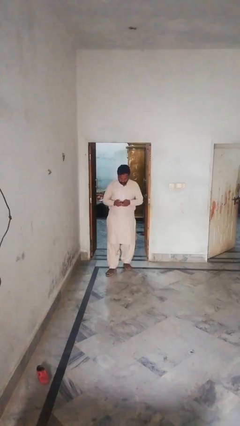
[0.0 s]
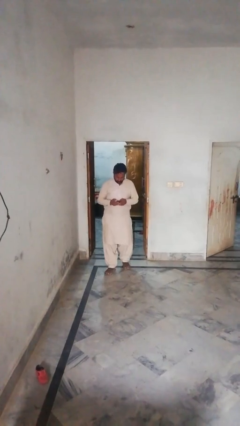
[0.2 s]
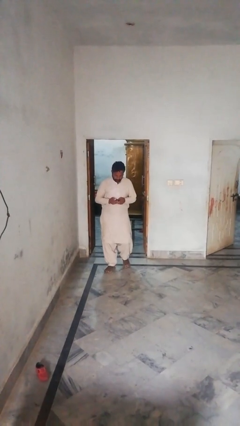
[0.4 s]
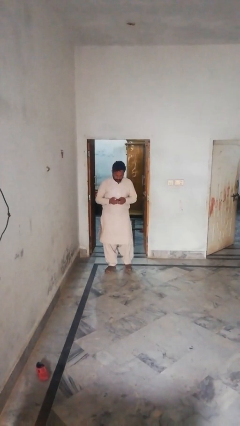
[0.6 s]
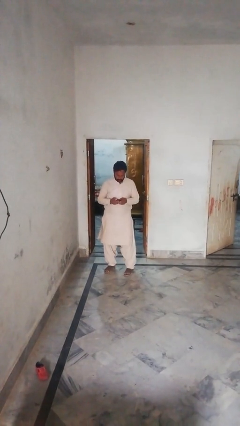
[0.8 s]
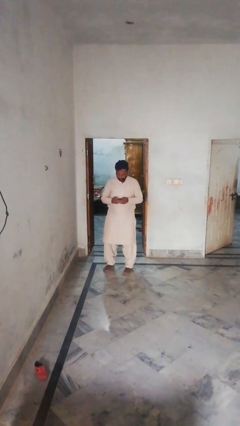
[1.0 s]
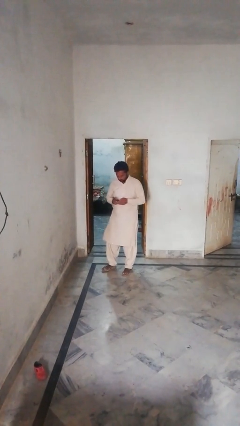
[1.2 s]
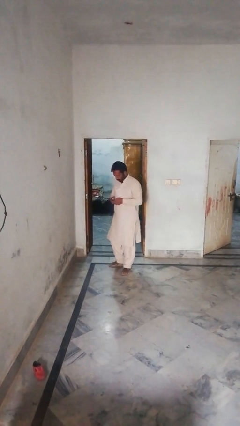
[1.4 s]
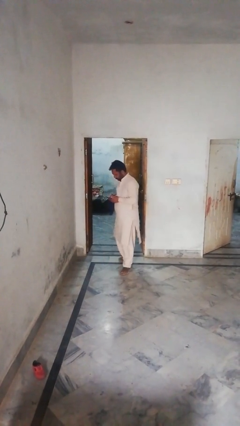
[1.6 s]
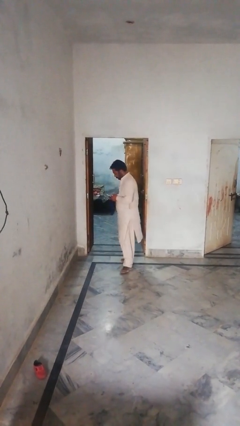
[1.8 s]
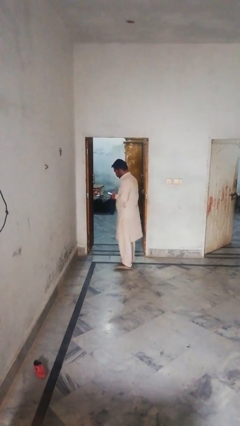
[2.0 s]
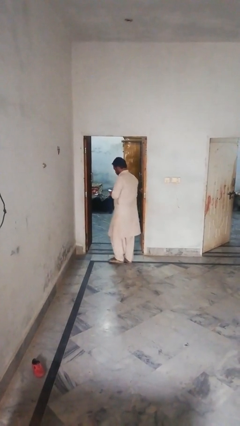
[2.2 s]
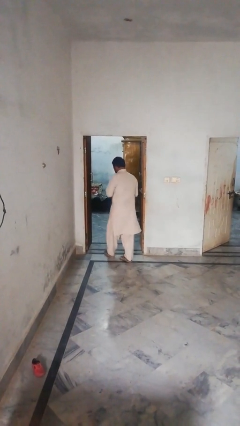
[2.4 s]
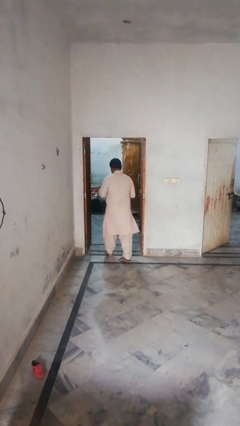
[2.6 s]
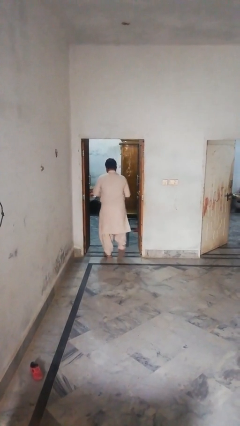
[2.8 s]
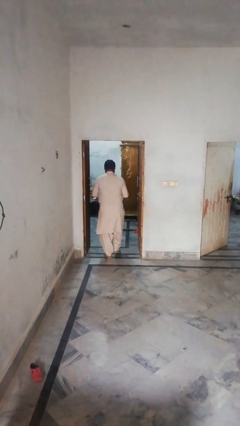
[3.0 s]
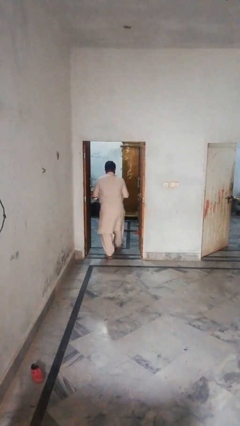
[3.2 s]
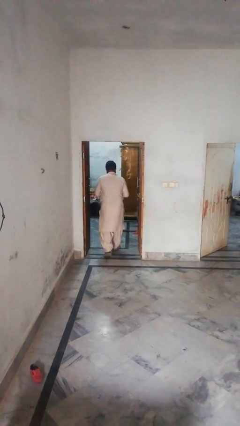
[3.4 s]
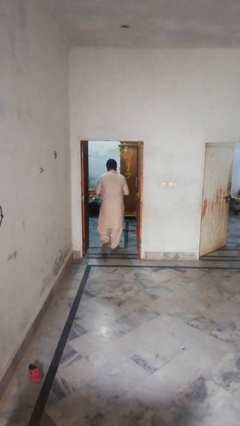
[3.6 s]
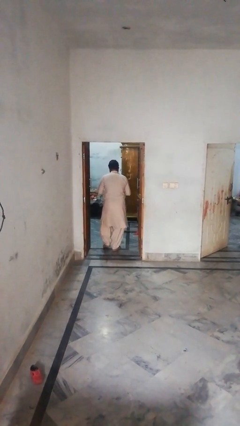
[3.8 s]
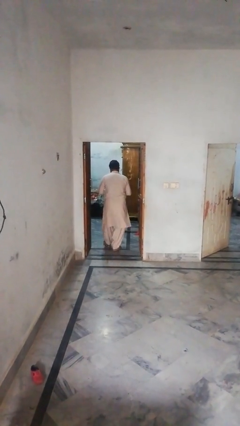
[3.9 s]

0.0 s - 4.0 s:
person enters scene through structure

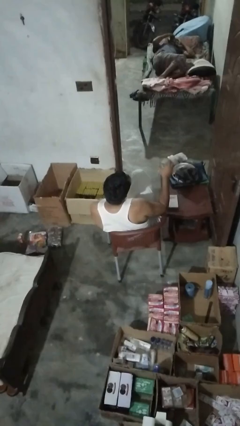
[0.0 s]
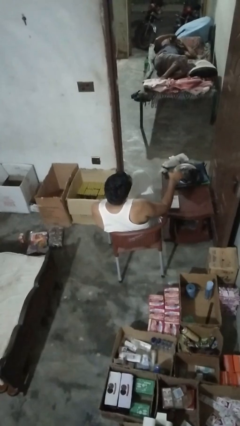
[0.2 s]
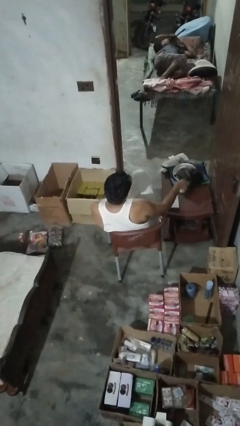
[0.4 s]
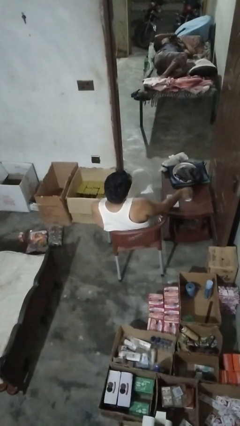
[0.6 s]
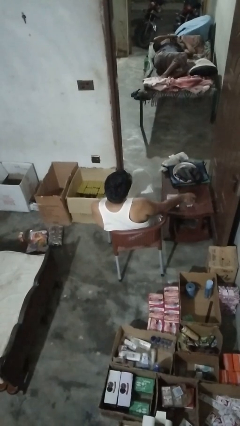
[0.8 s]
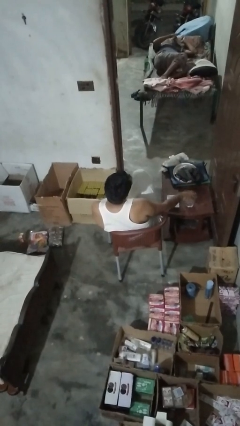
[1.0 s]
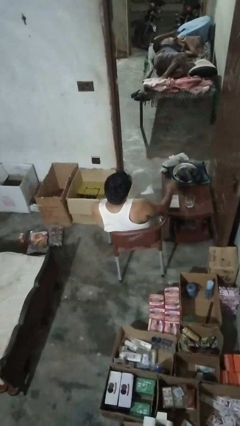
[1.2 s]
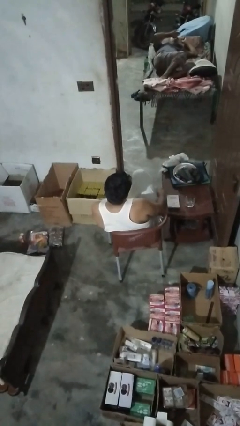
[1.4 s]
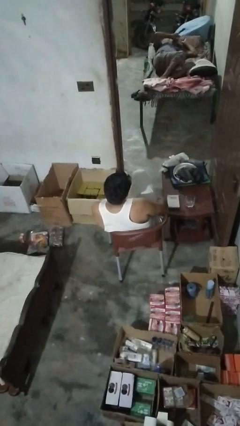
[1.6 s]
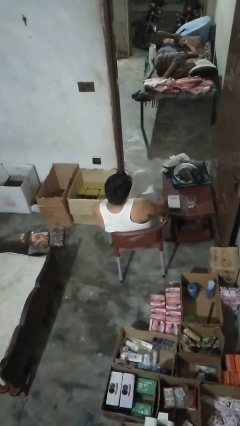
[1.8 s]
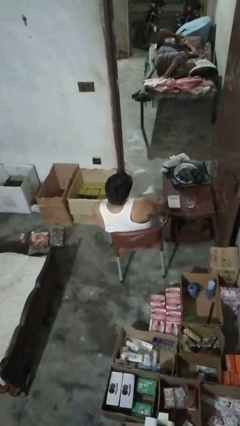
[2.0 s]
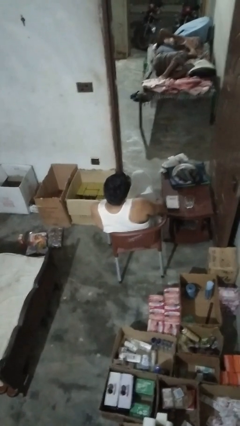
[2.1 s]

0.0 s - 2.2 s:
person sets upright glass

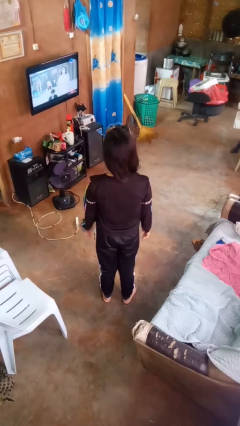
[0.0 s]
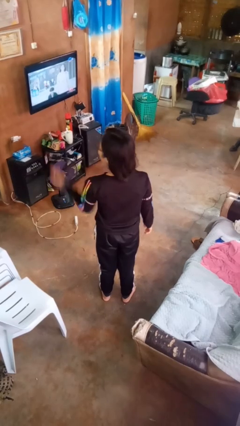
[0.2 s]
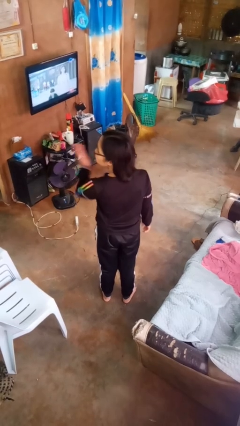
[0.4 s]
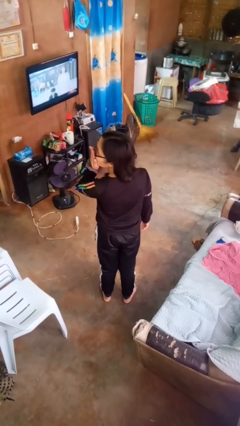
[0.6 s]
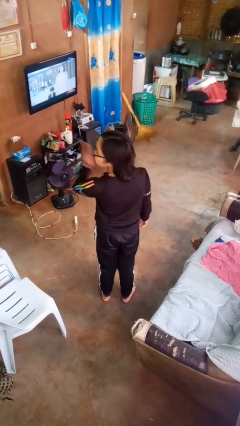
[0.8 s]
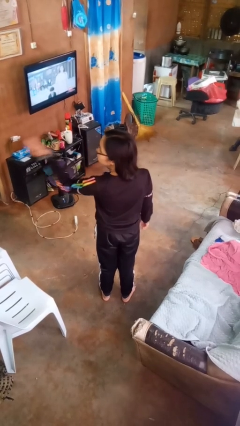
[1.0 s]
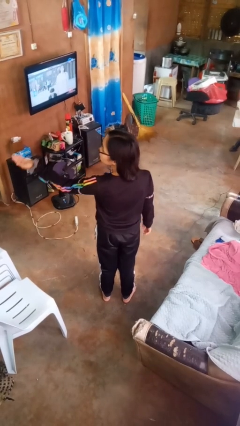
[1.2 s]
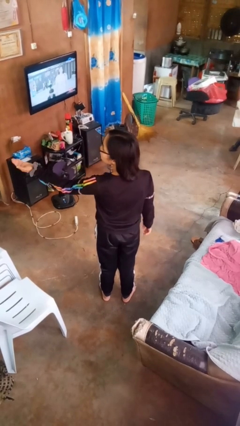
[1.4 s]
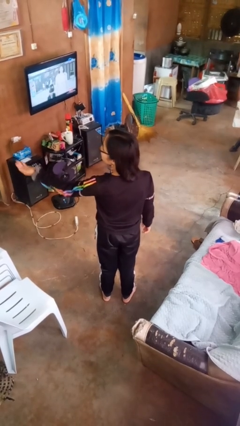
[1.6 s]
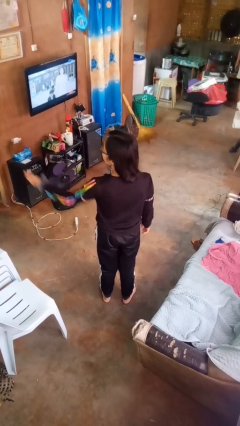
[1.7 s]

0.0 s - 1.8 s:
person gestures blow kiss

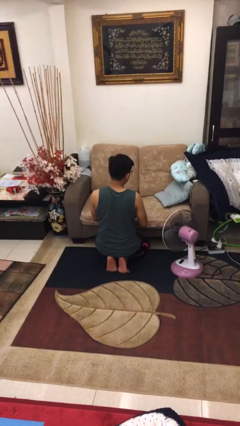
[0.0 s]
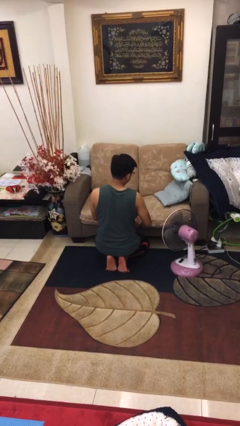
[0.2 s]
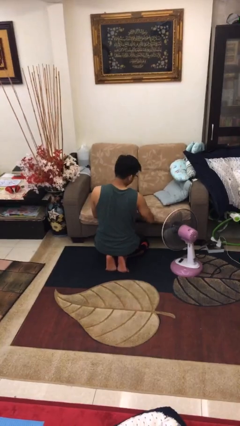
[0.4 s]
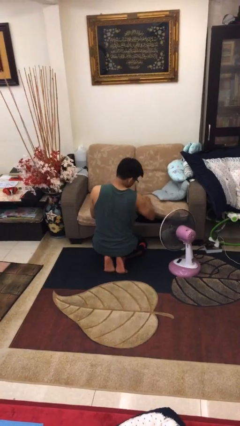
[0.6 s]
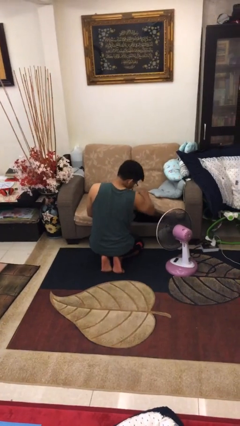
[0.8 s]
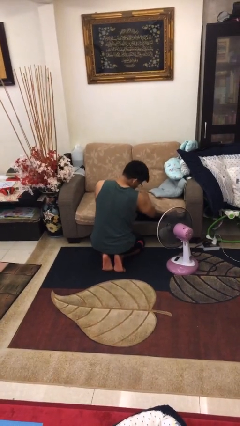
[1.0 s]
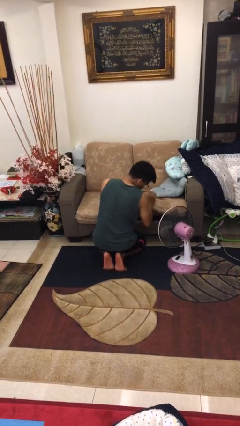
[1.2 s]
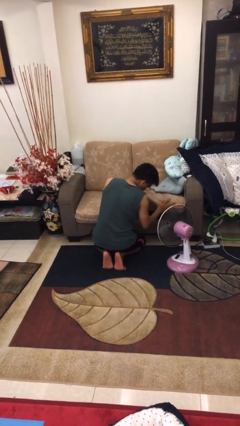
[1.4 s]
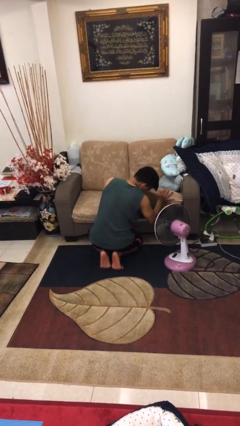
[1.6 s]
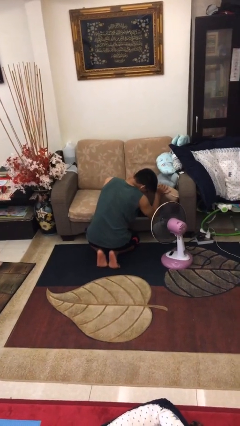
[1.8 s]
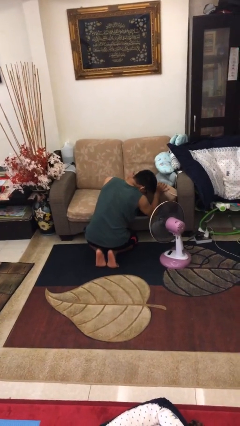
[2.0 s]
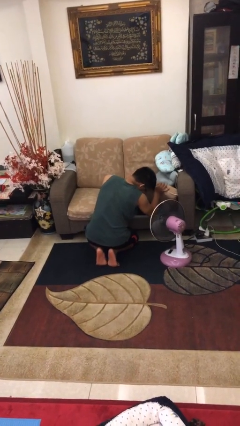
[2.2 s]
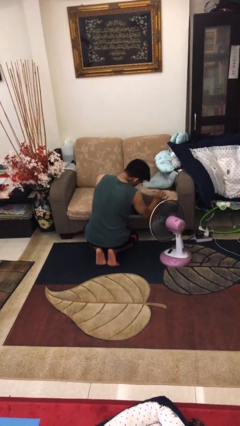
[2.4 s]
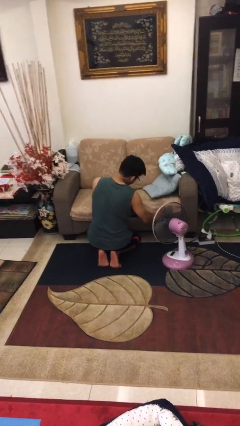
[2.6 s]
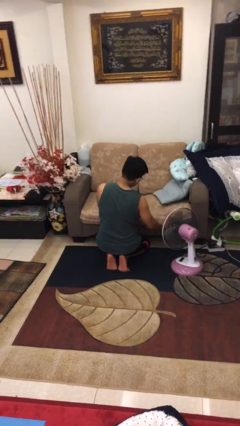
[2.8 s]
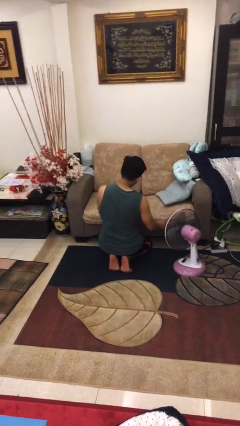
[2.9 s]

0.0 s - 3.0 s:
person searches in couch

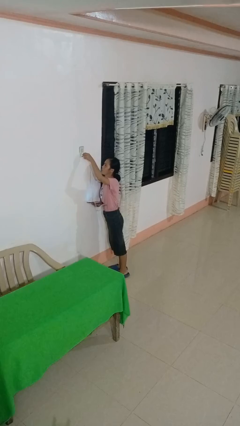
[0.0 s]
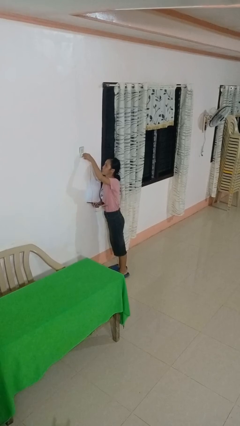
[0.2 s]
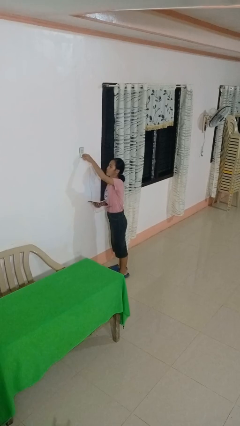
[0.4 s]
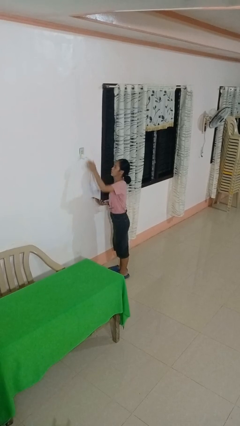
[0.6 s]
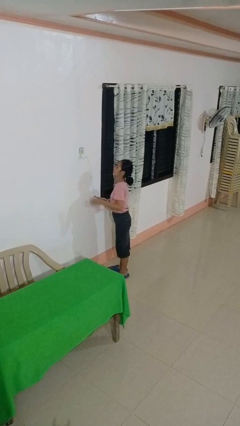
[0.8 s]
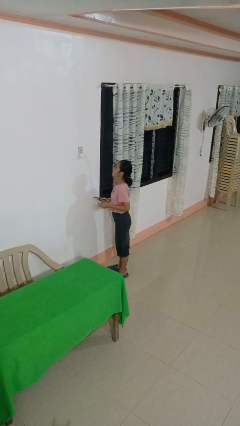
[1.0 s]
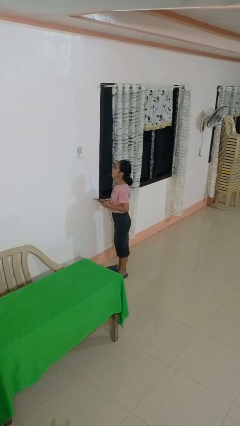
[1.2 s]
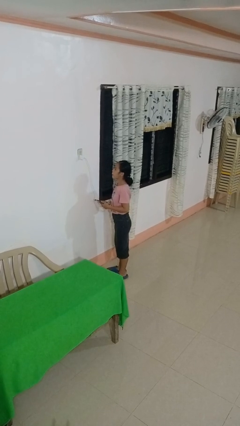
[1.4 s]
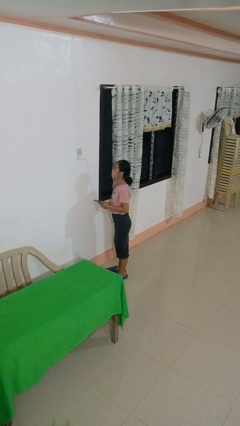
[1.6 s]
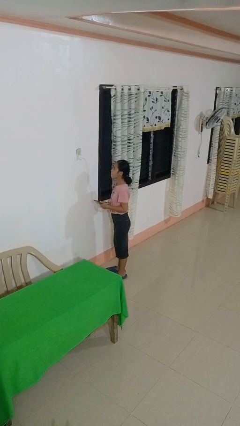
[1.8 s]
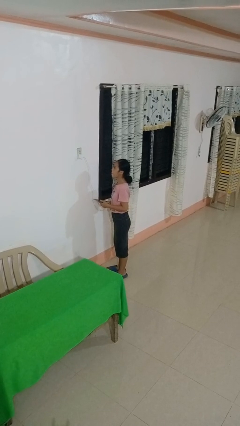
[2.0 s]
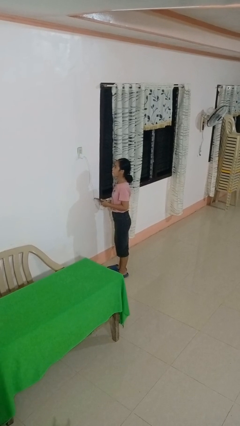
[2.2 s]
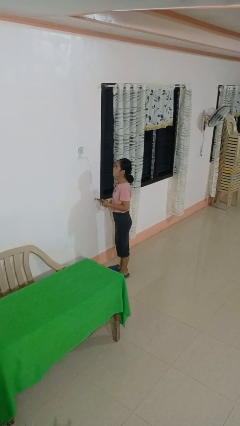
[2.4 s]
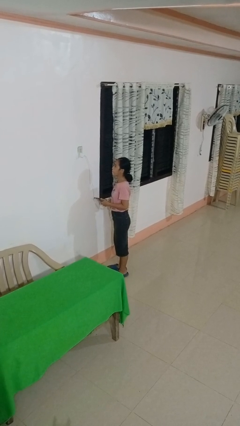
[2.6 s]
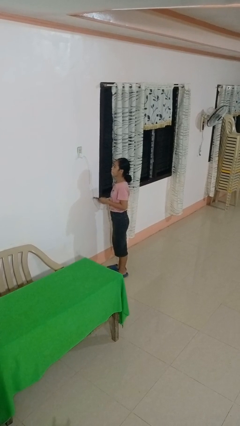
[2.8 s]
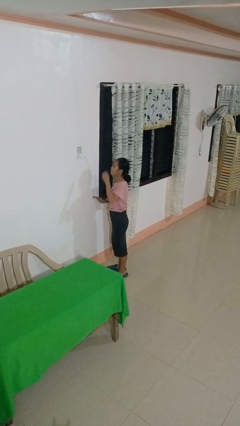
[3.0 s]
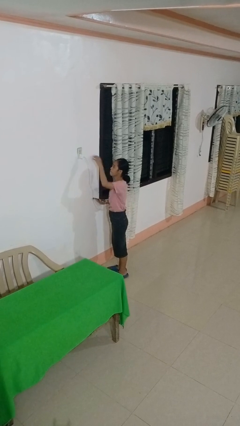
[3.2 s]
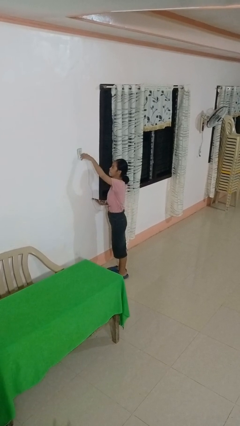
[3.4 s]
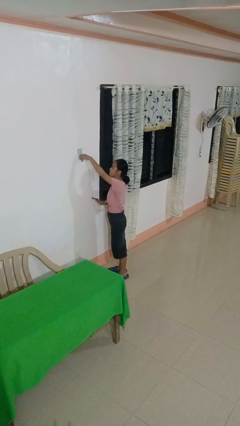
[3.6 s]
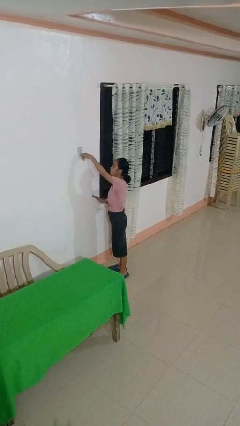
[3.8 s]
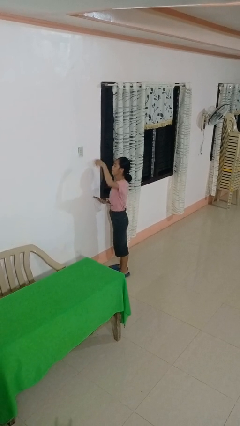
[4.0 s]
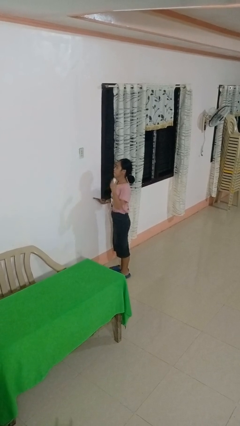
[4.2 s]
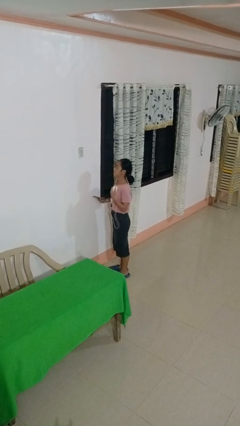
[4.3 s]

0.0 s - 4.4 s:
person plugs into electrical socket

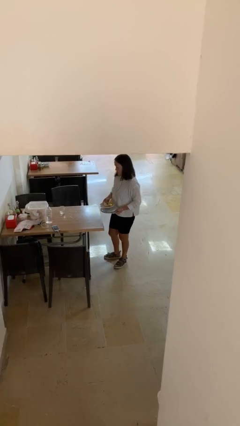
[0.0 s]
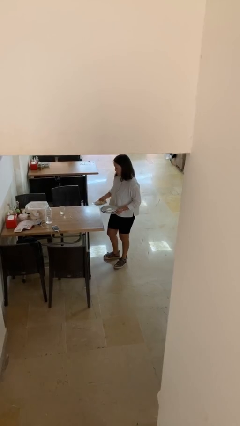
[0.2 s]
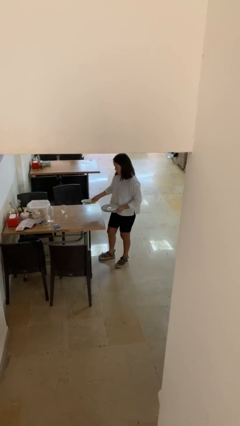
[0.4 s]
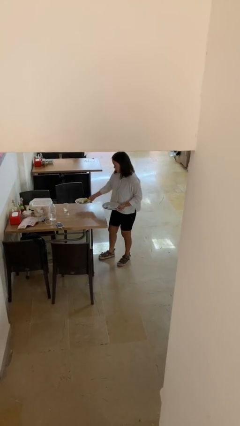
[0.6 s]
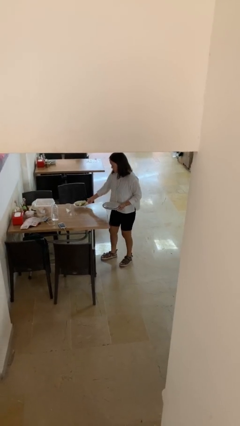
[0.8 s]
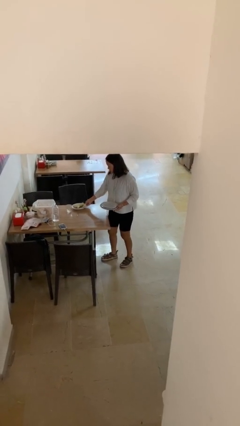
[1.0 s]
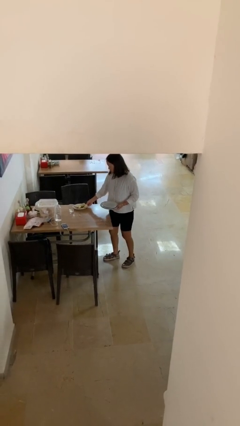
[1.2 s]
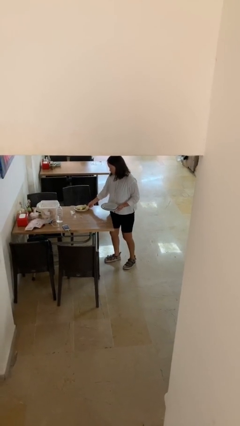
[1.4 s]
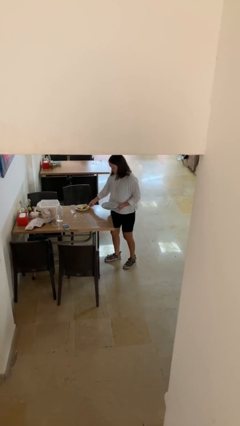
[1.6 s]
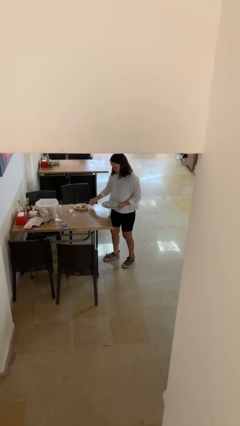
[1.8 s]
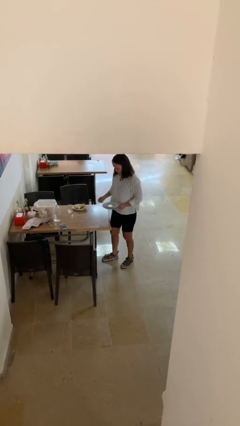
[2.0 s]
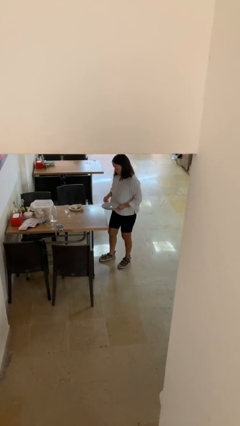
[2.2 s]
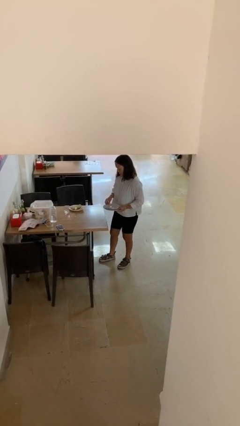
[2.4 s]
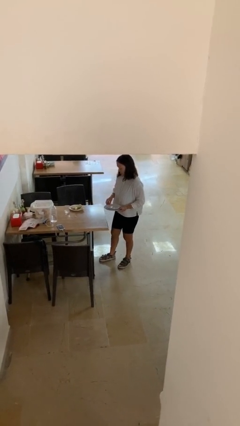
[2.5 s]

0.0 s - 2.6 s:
person sets table
